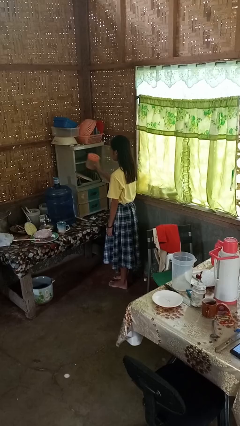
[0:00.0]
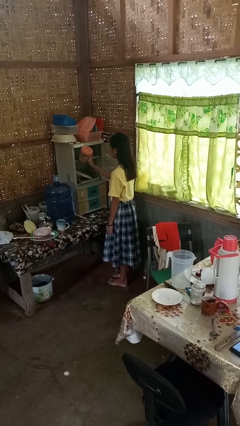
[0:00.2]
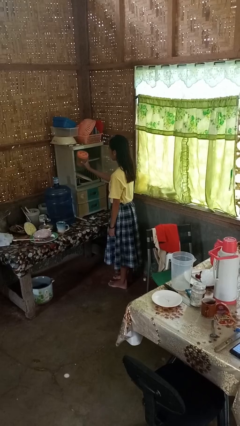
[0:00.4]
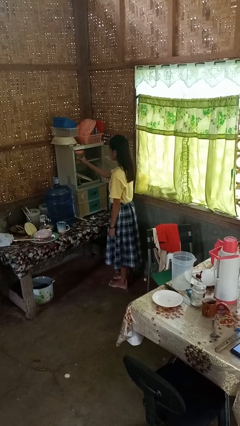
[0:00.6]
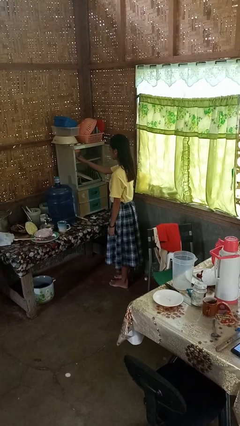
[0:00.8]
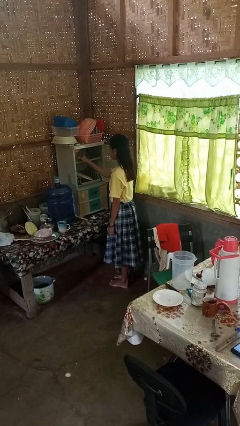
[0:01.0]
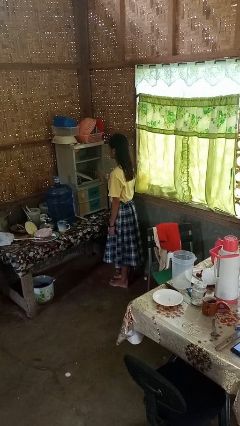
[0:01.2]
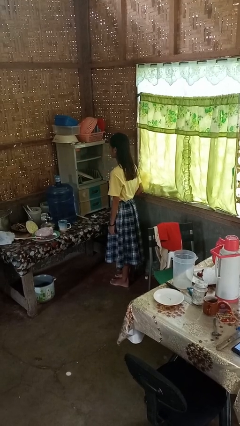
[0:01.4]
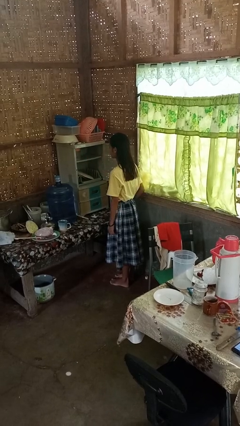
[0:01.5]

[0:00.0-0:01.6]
person puts down object into cabinet

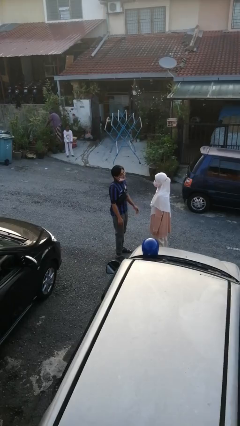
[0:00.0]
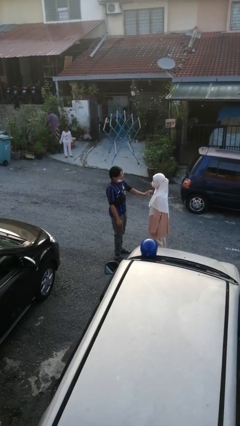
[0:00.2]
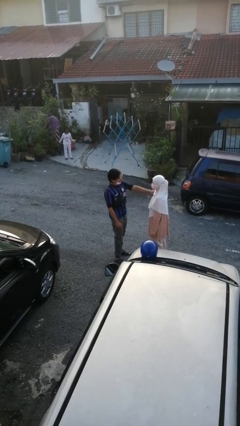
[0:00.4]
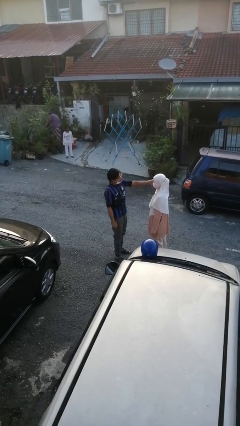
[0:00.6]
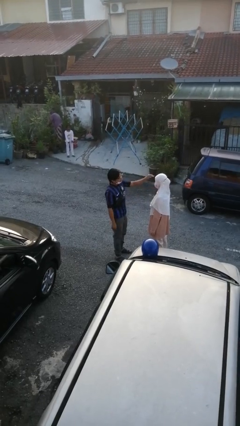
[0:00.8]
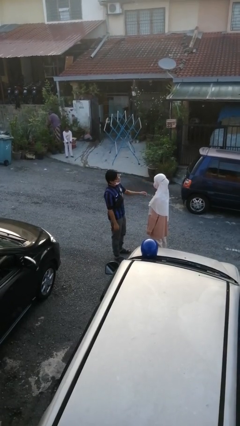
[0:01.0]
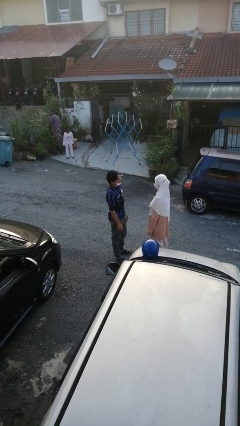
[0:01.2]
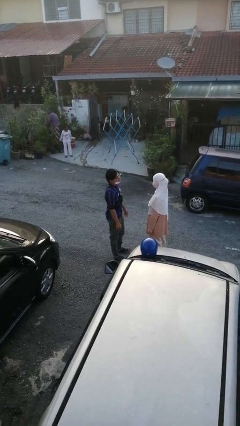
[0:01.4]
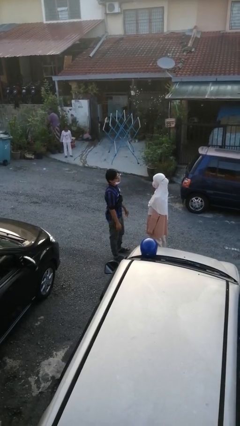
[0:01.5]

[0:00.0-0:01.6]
person shoves person

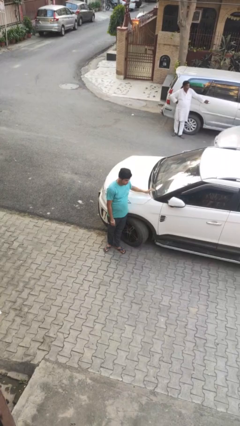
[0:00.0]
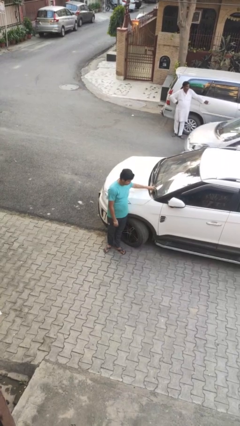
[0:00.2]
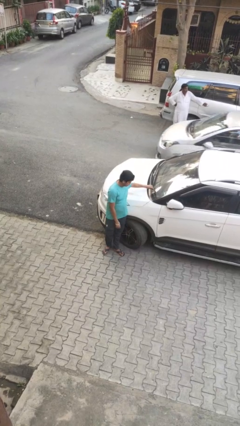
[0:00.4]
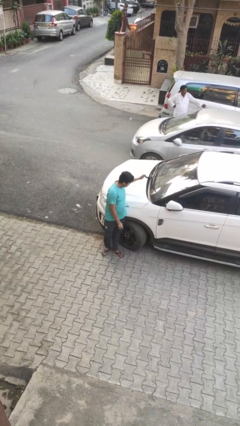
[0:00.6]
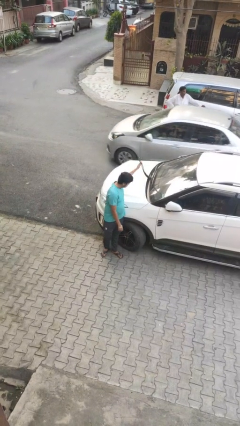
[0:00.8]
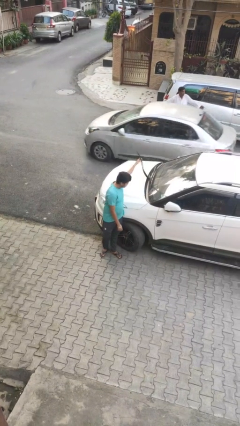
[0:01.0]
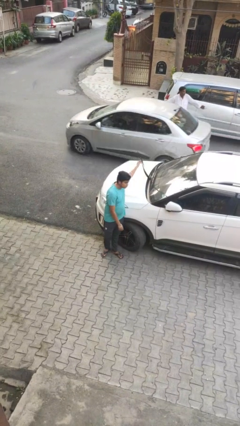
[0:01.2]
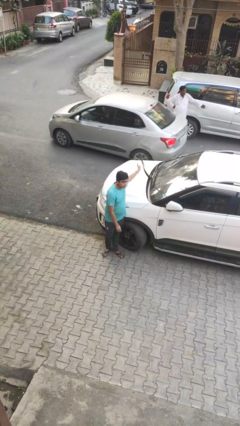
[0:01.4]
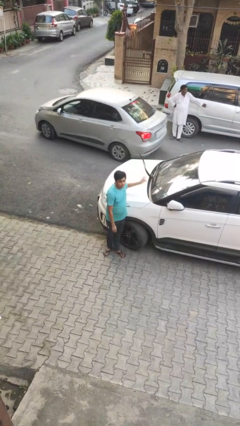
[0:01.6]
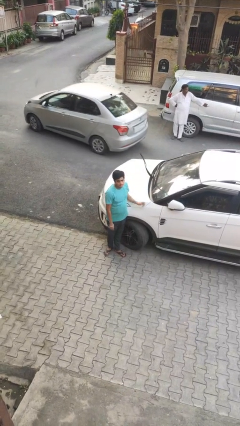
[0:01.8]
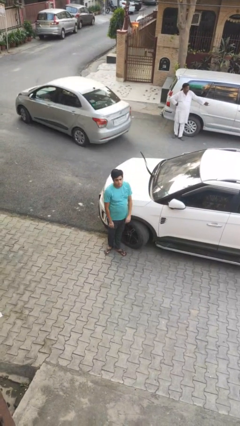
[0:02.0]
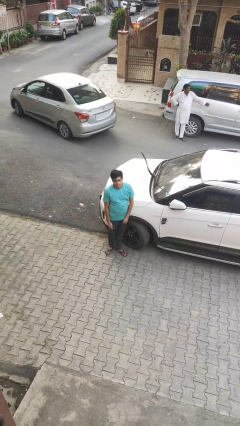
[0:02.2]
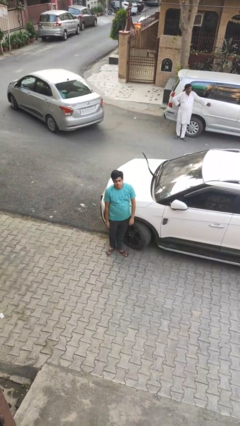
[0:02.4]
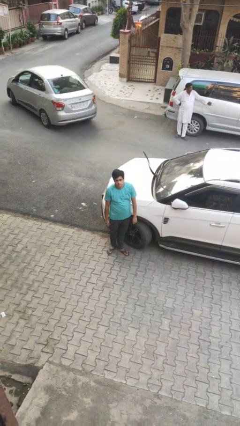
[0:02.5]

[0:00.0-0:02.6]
person flips up car wipers

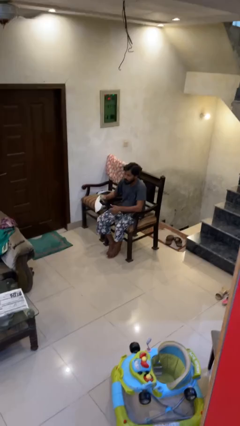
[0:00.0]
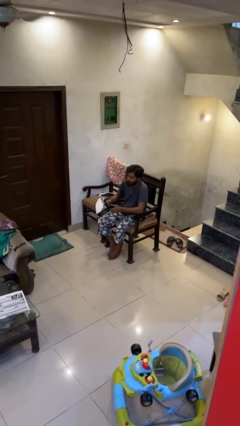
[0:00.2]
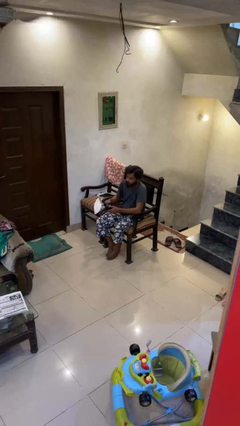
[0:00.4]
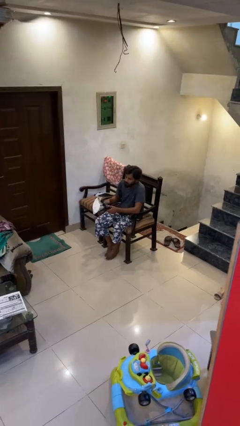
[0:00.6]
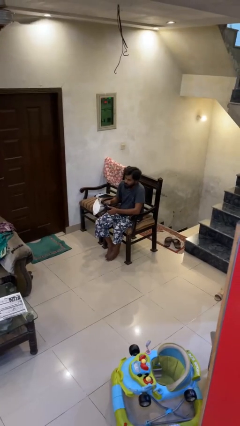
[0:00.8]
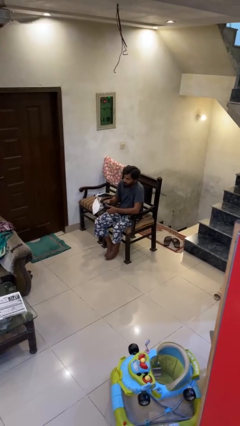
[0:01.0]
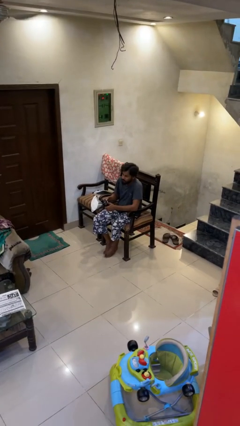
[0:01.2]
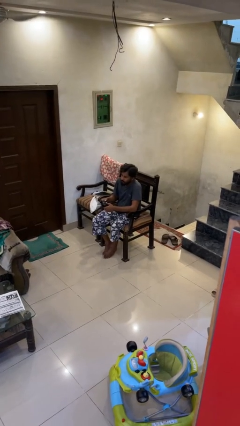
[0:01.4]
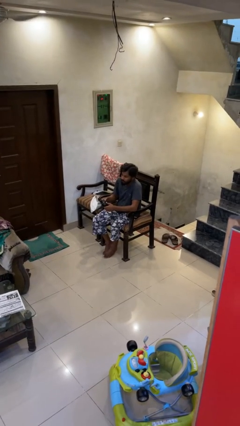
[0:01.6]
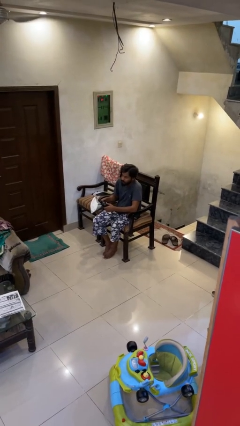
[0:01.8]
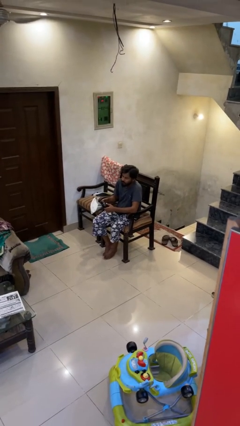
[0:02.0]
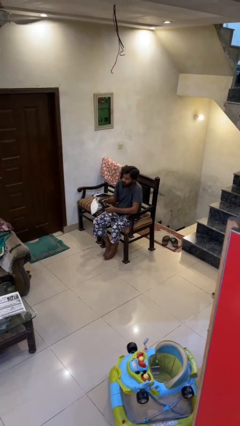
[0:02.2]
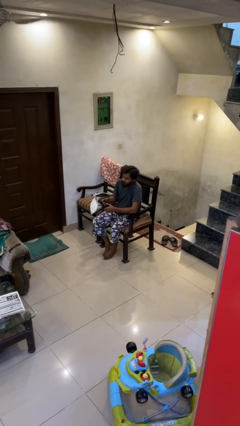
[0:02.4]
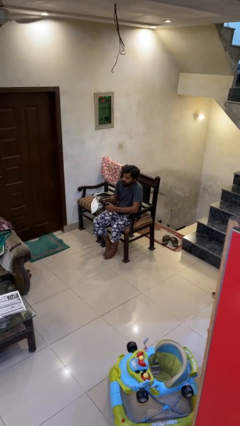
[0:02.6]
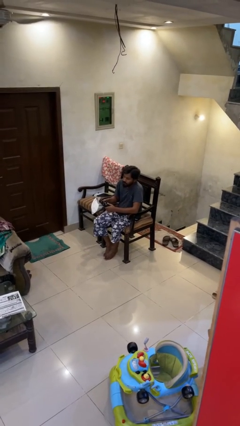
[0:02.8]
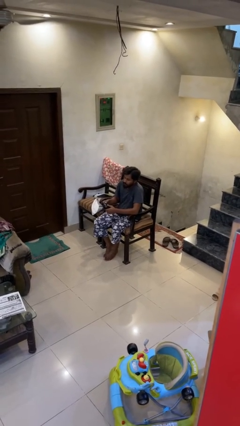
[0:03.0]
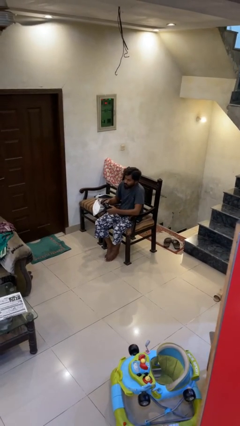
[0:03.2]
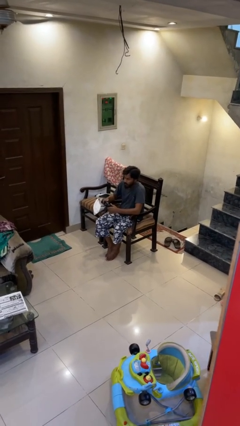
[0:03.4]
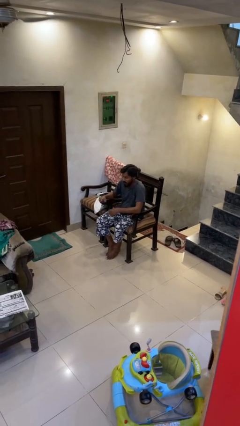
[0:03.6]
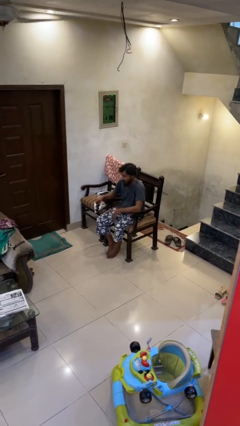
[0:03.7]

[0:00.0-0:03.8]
person interacts with handheld game

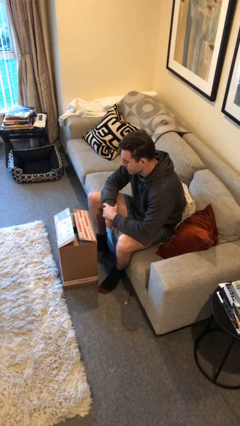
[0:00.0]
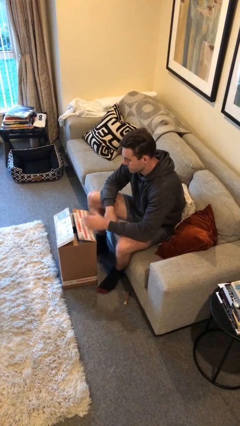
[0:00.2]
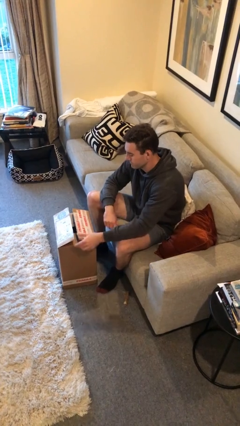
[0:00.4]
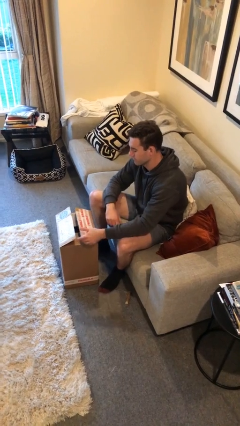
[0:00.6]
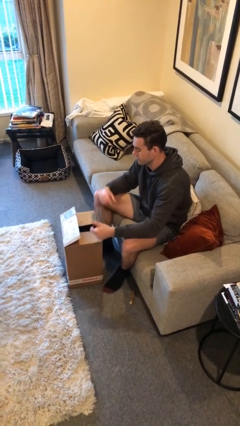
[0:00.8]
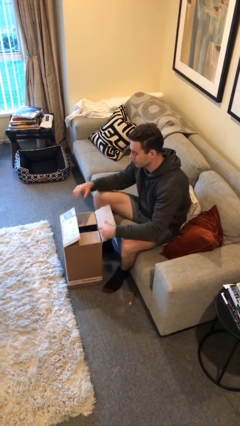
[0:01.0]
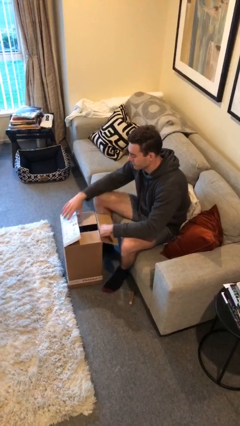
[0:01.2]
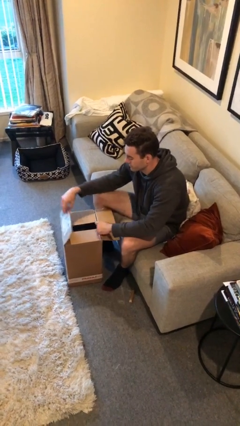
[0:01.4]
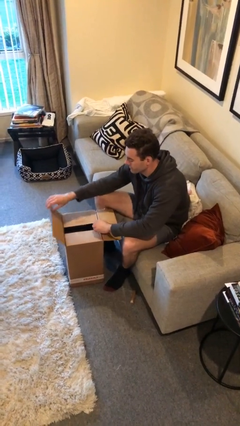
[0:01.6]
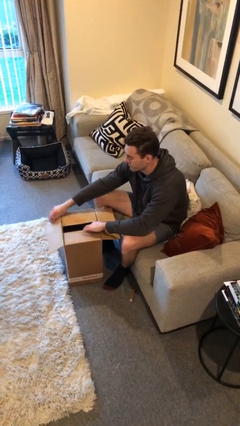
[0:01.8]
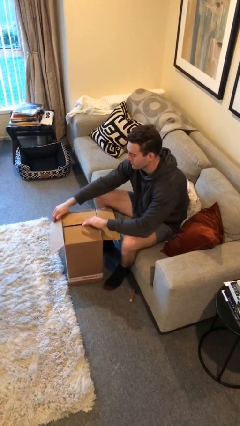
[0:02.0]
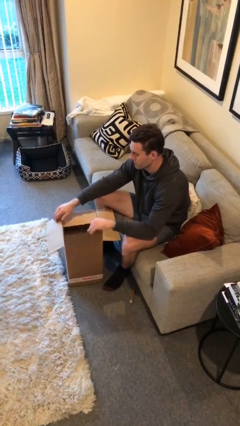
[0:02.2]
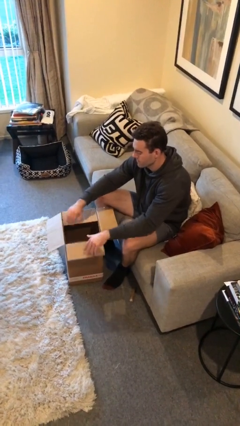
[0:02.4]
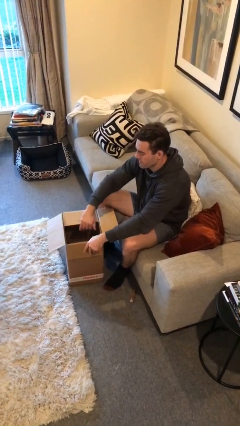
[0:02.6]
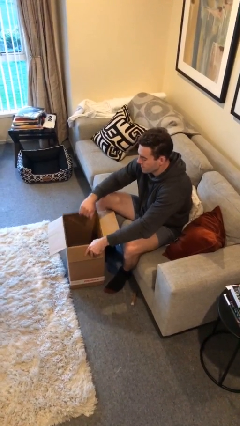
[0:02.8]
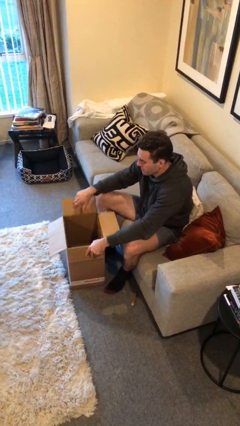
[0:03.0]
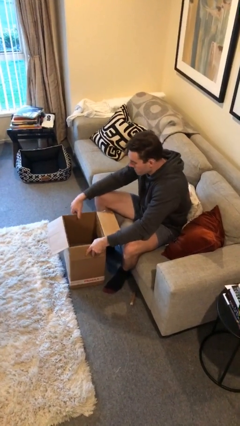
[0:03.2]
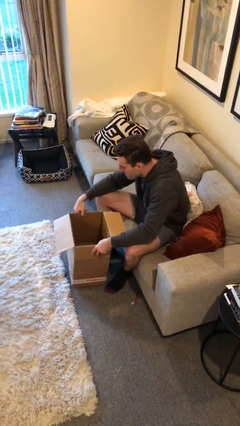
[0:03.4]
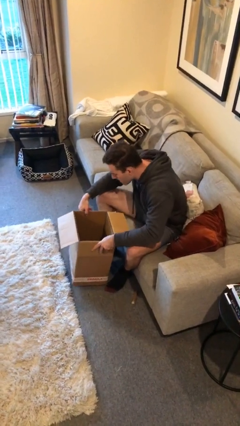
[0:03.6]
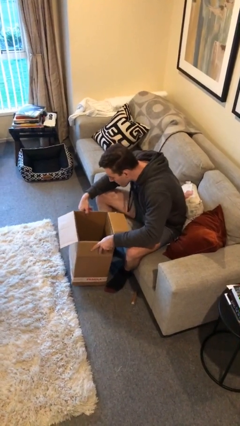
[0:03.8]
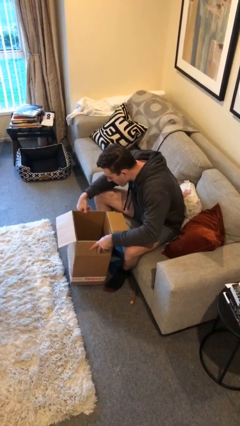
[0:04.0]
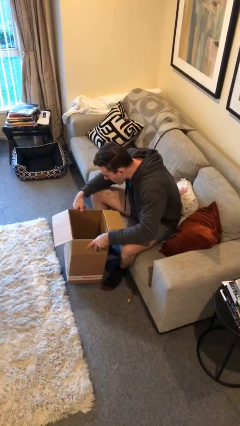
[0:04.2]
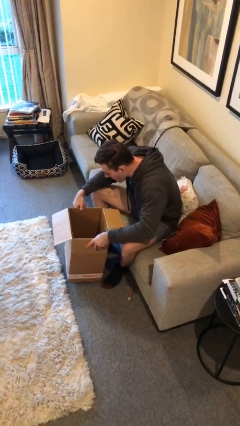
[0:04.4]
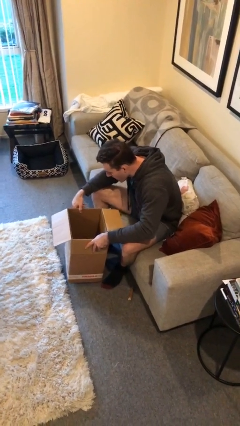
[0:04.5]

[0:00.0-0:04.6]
person opens box

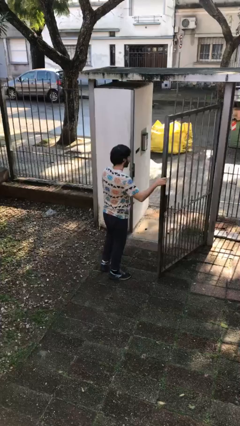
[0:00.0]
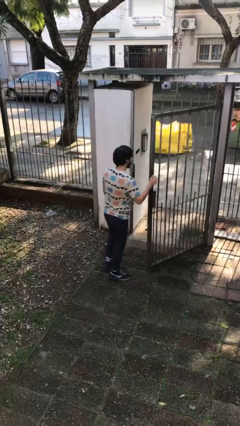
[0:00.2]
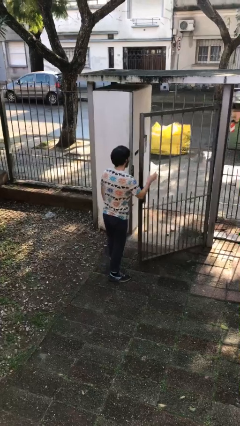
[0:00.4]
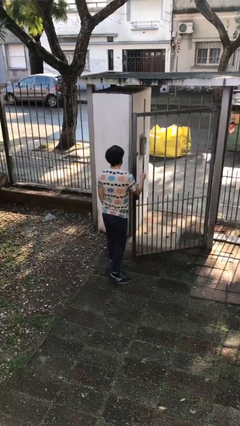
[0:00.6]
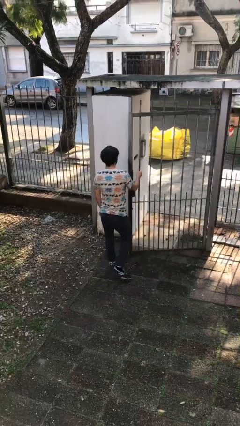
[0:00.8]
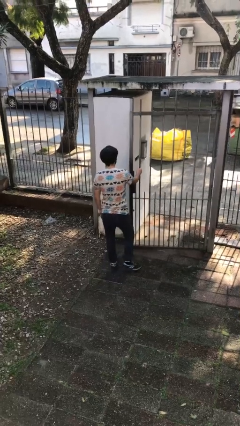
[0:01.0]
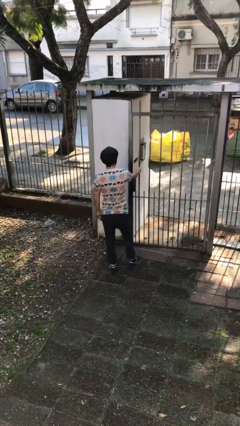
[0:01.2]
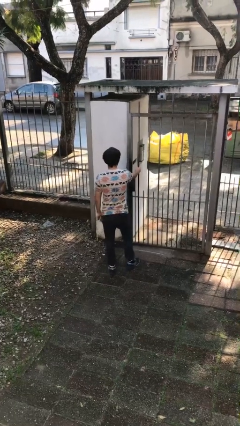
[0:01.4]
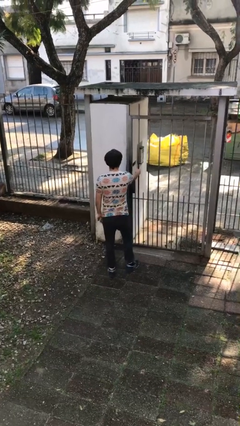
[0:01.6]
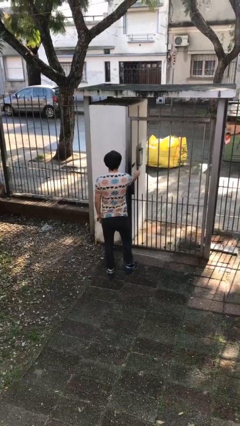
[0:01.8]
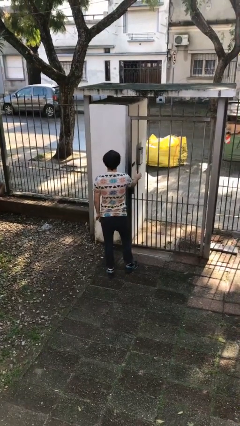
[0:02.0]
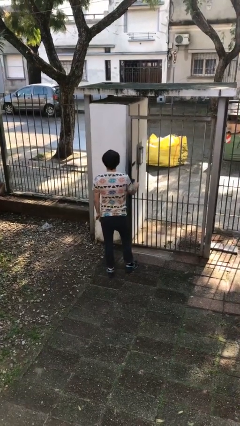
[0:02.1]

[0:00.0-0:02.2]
person closes gate

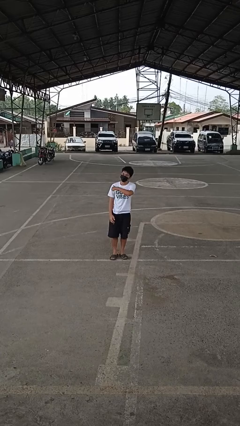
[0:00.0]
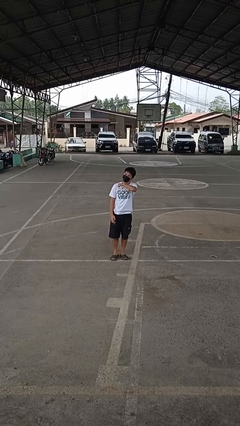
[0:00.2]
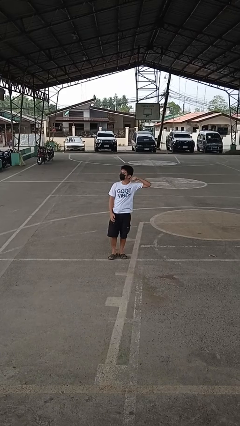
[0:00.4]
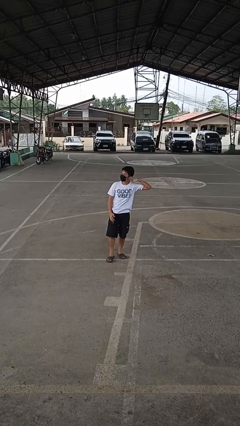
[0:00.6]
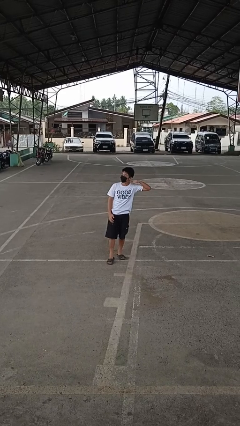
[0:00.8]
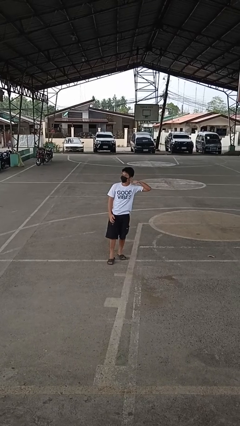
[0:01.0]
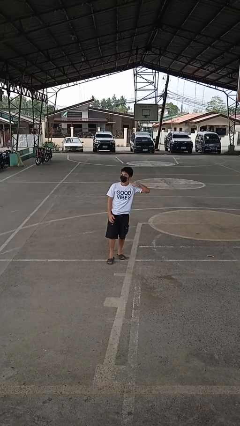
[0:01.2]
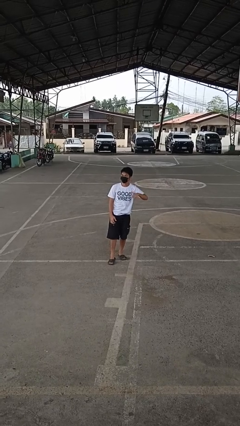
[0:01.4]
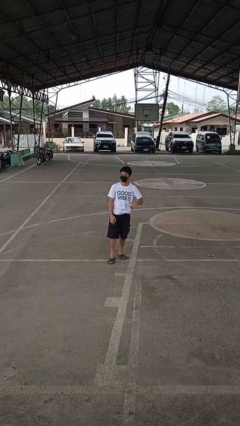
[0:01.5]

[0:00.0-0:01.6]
person gestures cut
